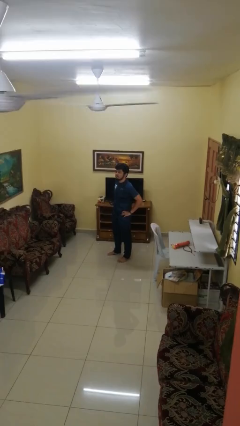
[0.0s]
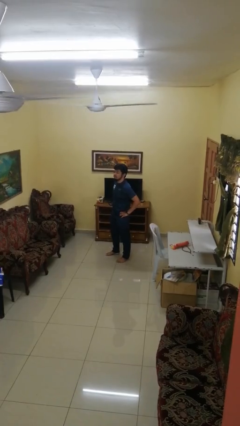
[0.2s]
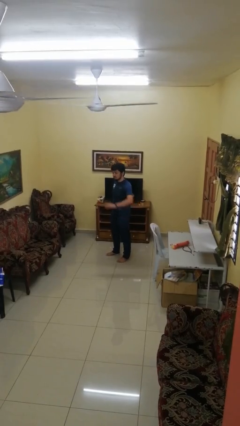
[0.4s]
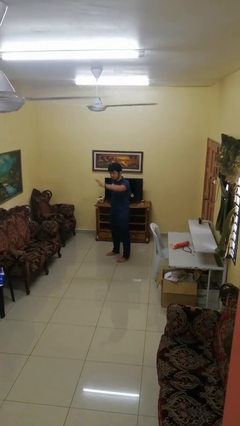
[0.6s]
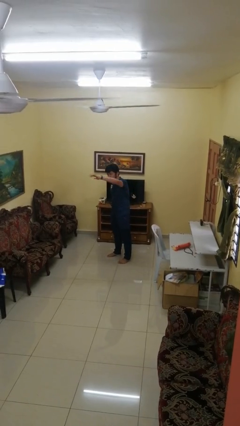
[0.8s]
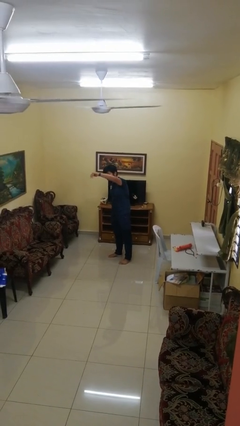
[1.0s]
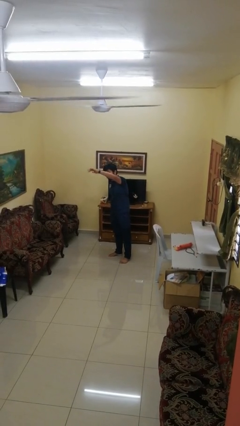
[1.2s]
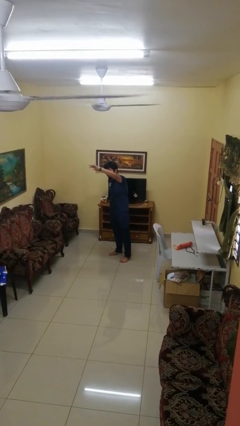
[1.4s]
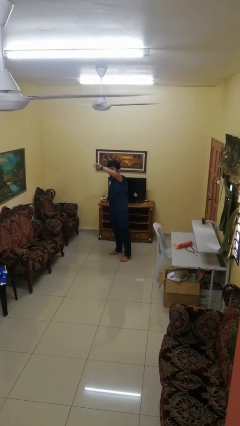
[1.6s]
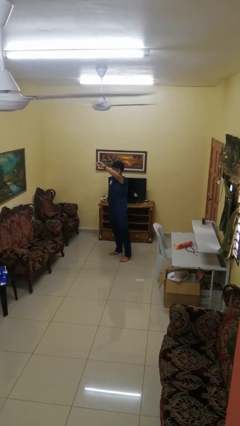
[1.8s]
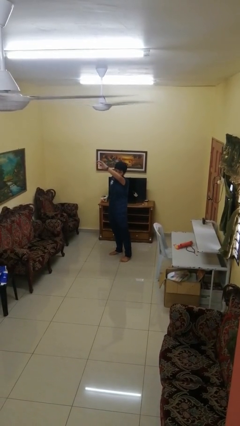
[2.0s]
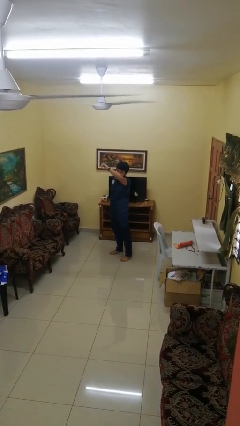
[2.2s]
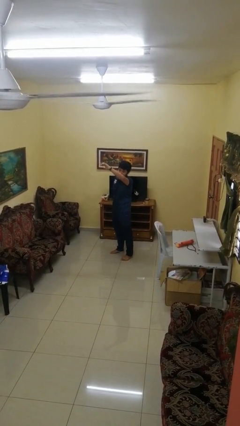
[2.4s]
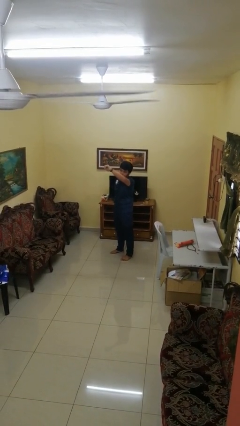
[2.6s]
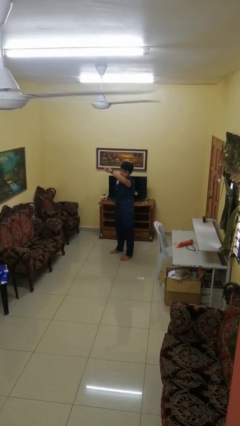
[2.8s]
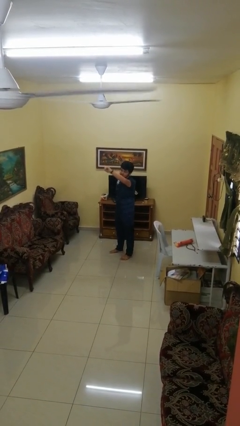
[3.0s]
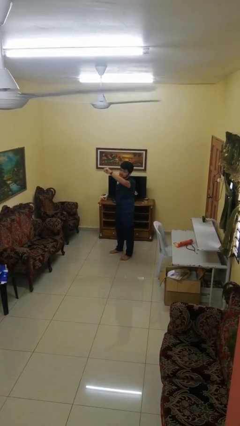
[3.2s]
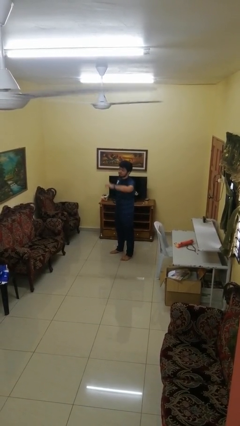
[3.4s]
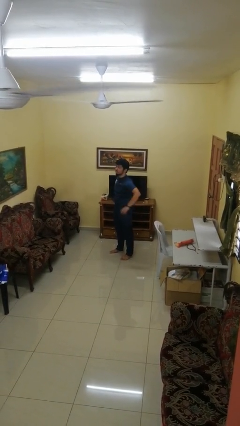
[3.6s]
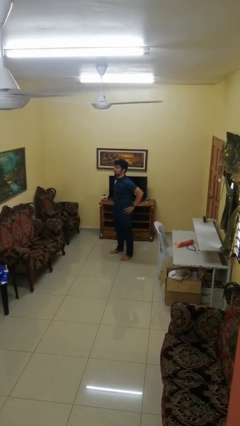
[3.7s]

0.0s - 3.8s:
person gestures come here

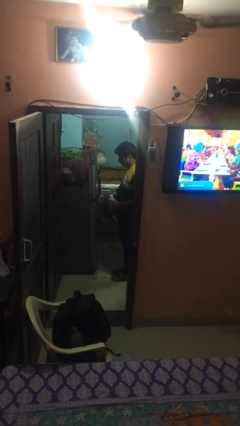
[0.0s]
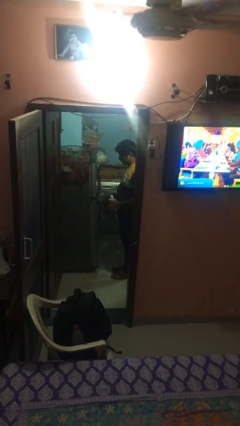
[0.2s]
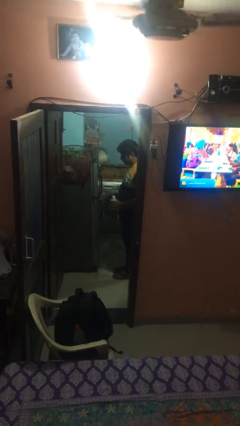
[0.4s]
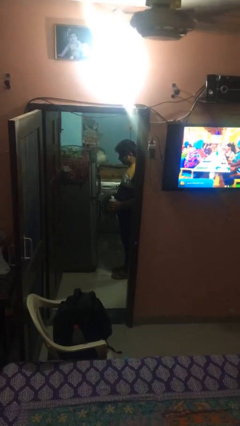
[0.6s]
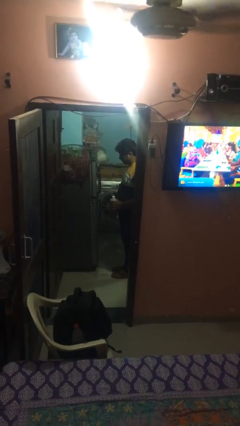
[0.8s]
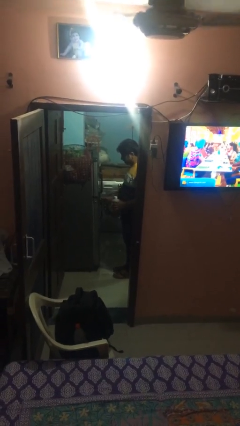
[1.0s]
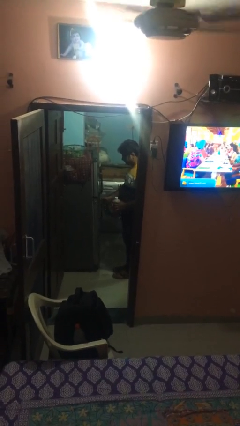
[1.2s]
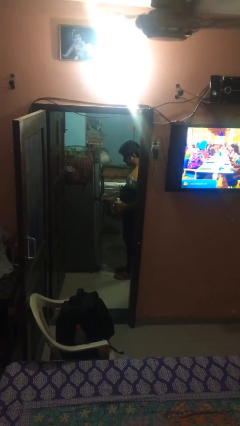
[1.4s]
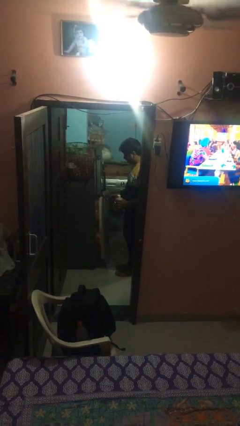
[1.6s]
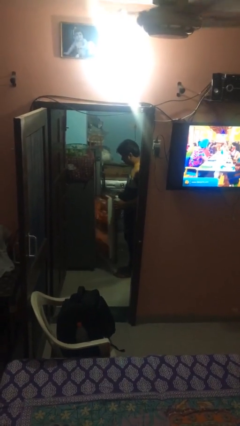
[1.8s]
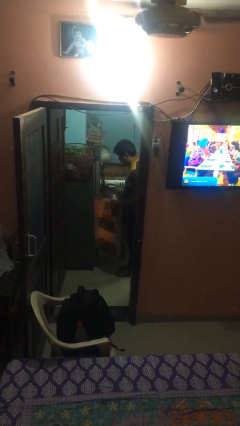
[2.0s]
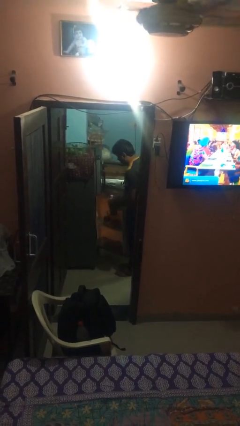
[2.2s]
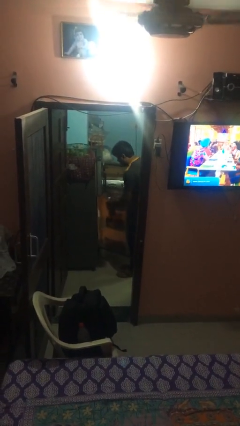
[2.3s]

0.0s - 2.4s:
person opens refrigerator

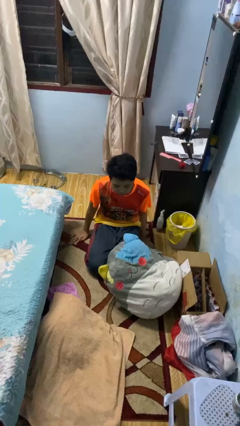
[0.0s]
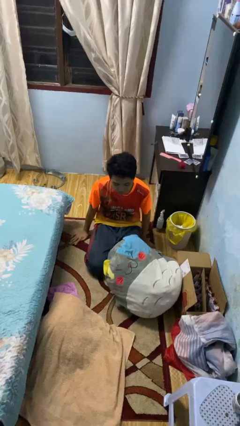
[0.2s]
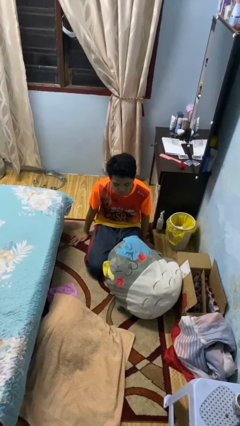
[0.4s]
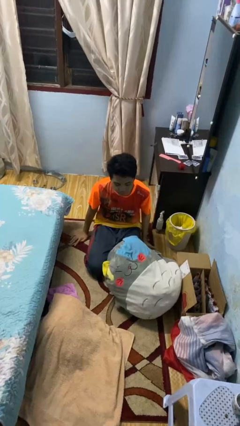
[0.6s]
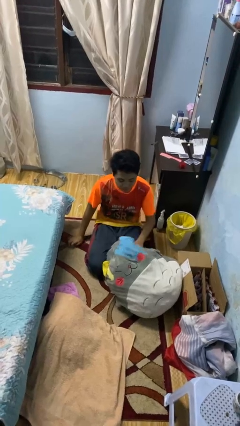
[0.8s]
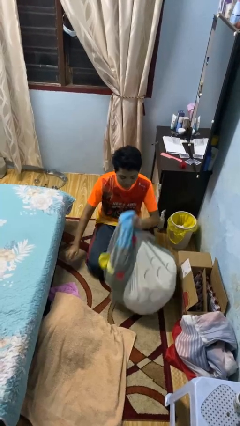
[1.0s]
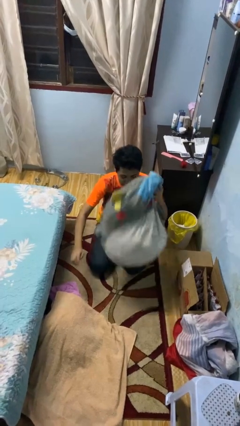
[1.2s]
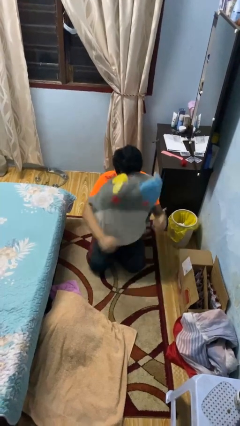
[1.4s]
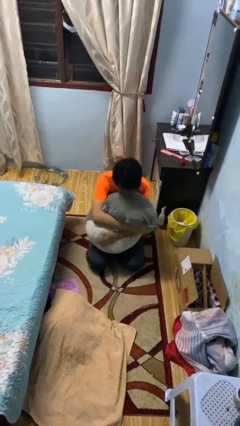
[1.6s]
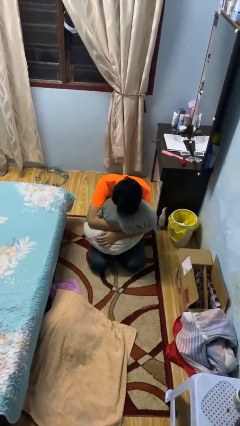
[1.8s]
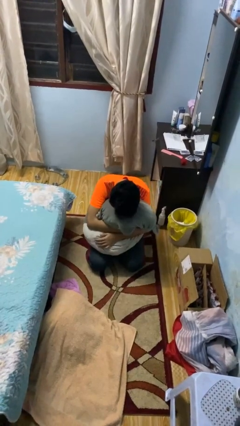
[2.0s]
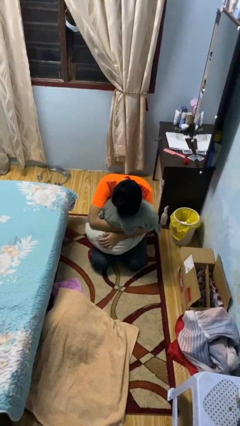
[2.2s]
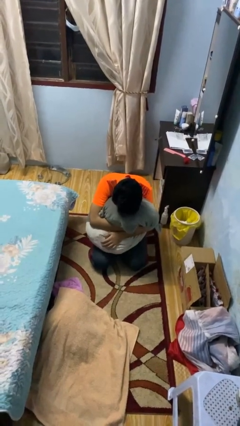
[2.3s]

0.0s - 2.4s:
person hugs stuffed animal

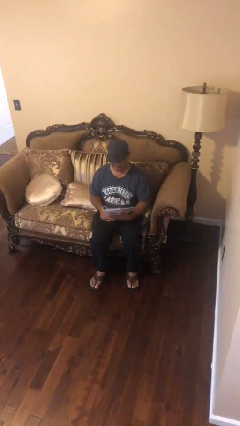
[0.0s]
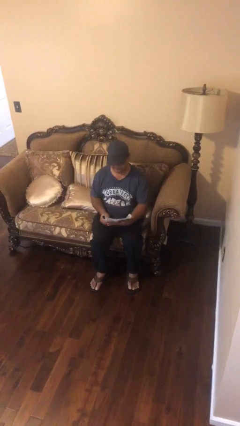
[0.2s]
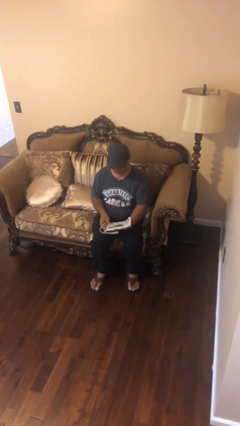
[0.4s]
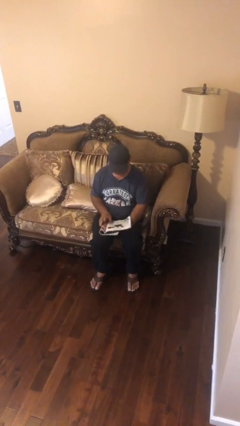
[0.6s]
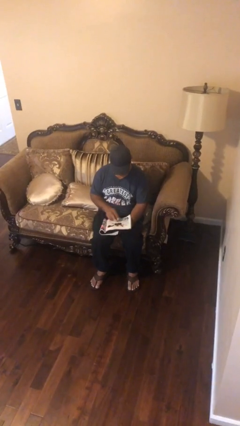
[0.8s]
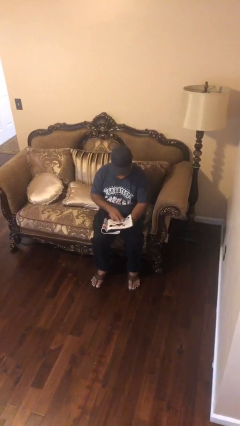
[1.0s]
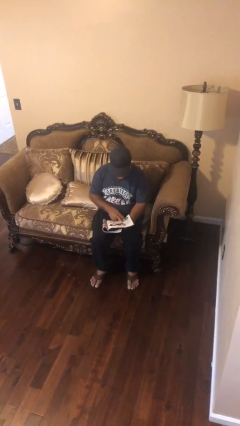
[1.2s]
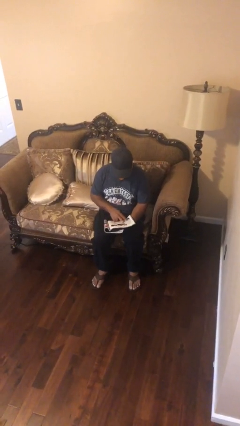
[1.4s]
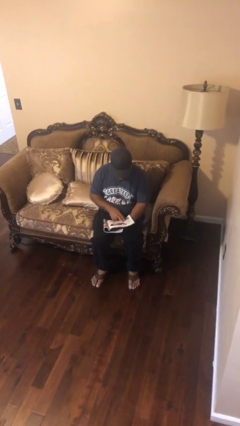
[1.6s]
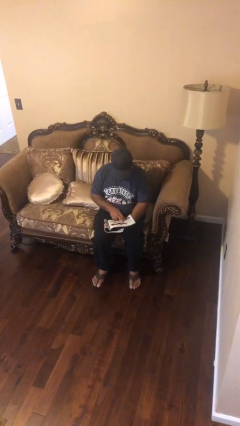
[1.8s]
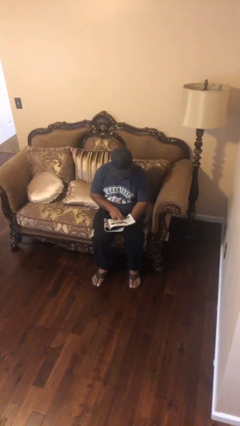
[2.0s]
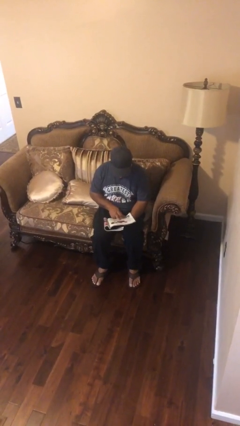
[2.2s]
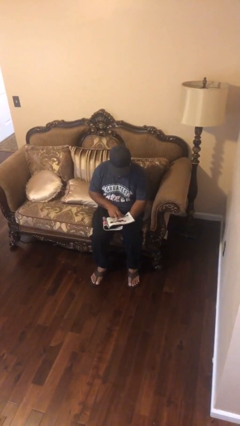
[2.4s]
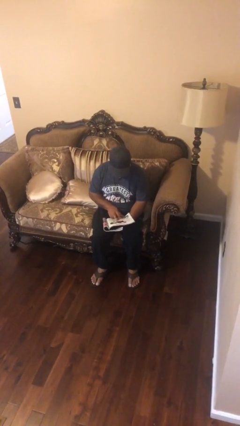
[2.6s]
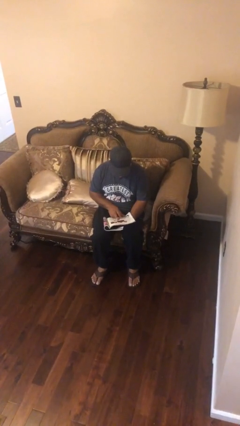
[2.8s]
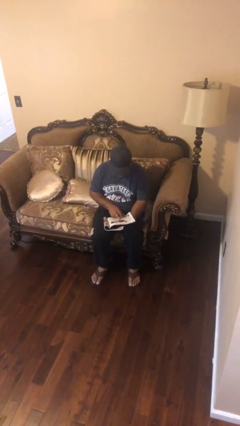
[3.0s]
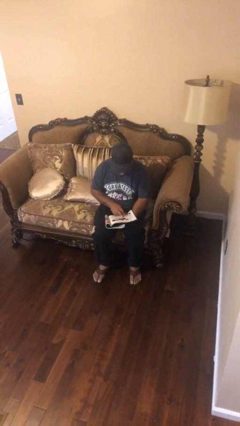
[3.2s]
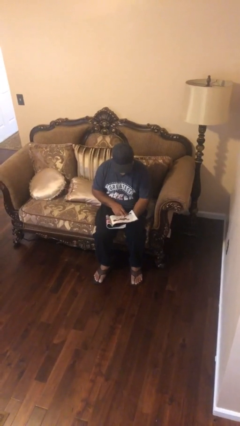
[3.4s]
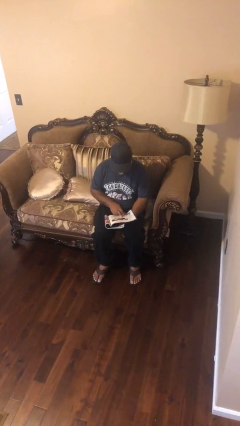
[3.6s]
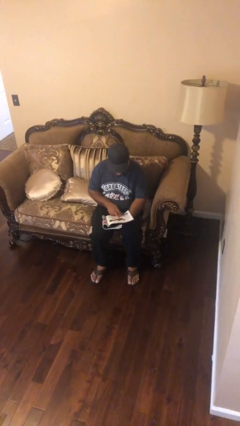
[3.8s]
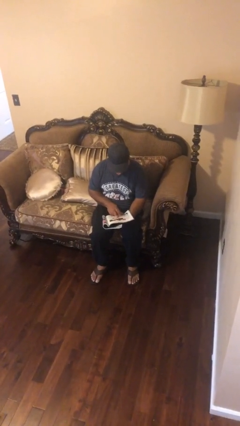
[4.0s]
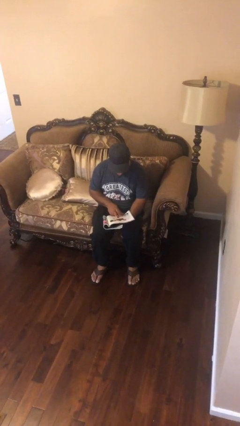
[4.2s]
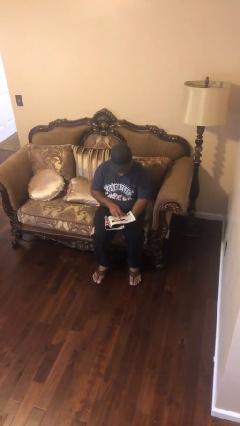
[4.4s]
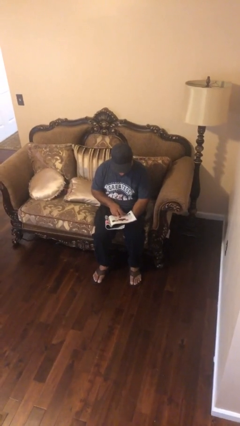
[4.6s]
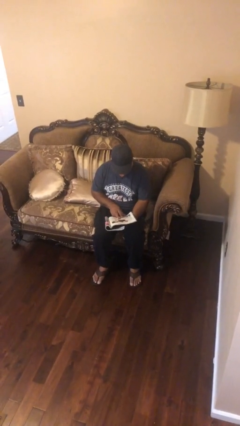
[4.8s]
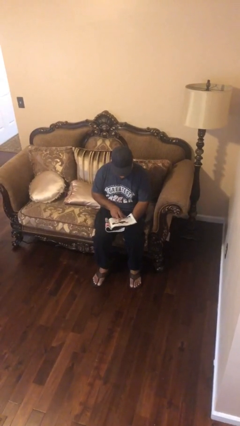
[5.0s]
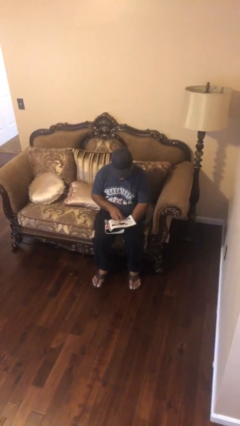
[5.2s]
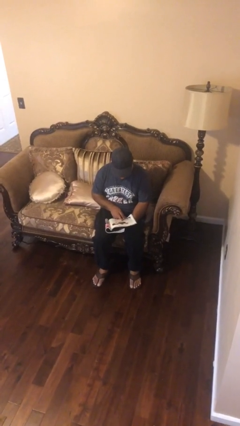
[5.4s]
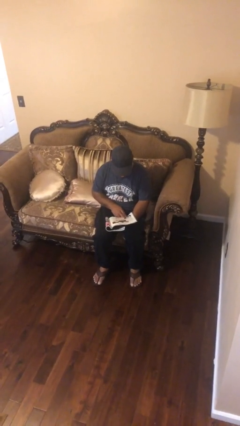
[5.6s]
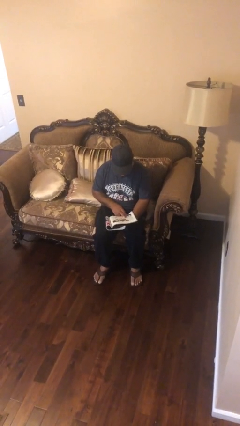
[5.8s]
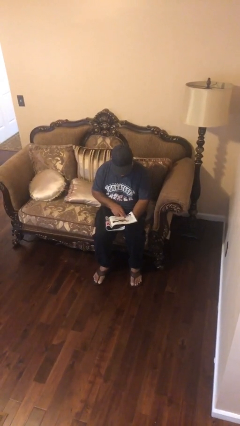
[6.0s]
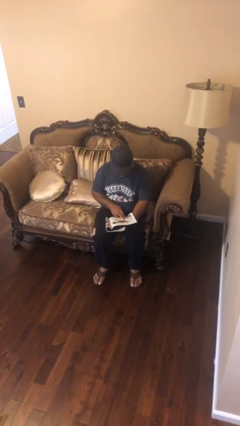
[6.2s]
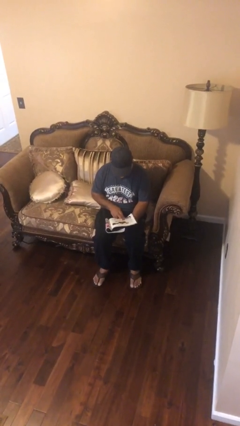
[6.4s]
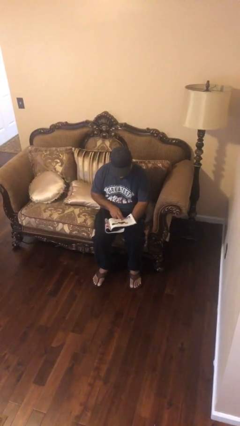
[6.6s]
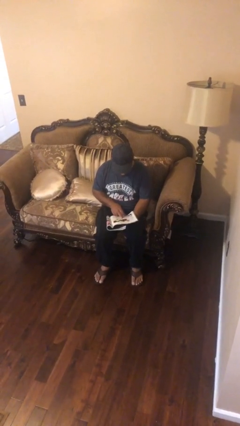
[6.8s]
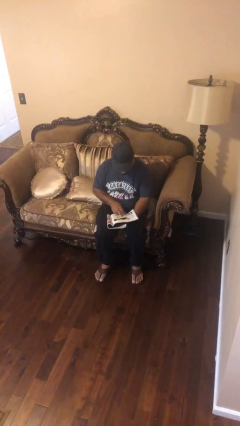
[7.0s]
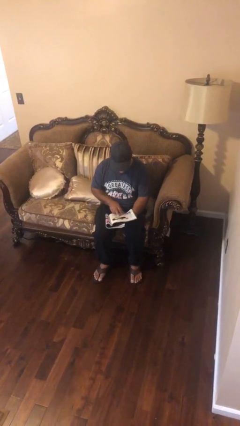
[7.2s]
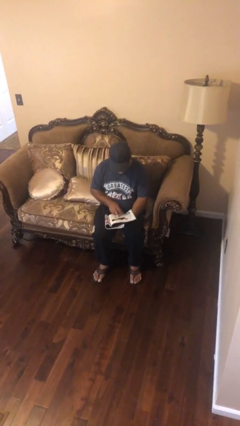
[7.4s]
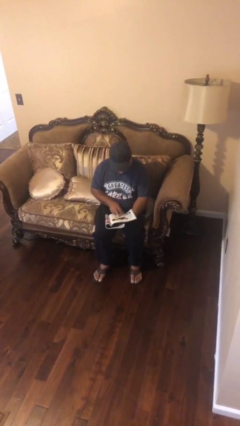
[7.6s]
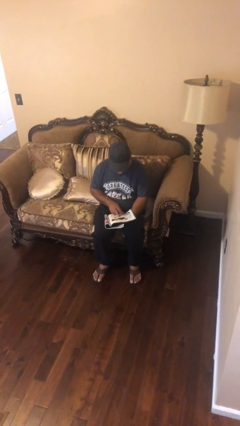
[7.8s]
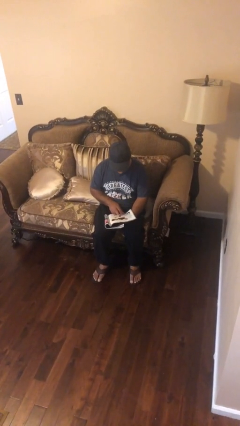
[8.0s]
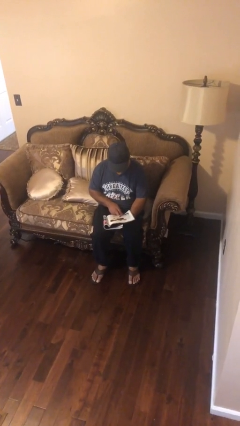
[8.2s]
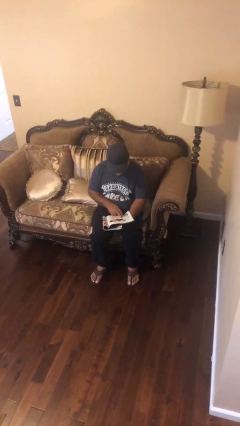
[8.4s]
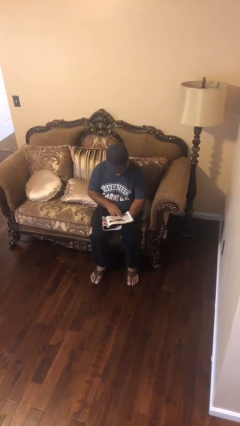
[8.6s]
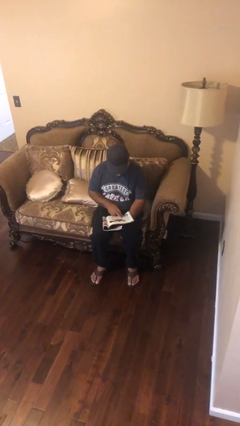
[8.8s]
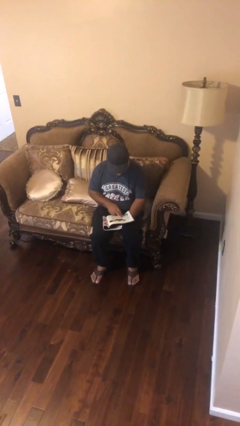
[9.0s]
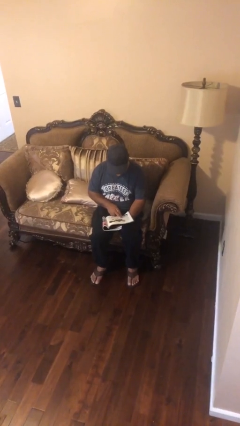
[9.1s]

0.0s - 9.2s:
person reads document
